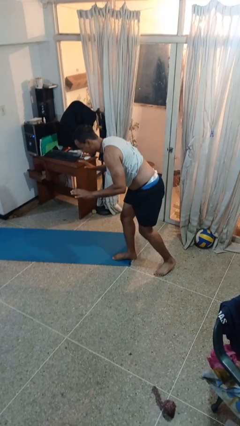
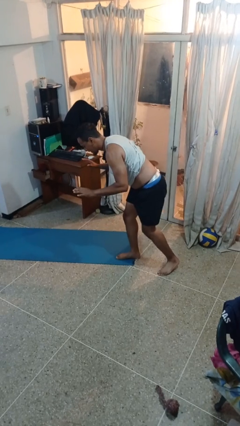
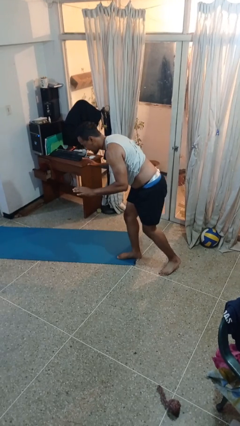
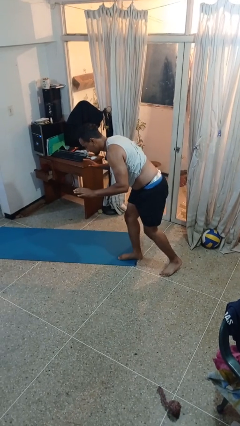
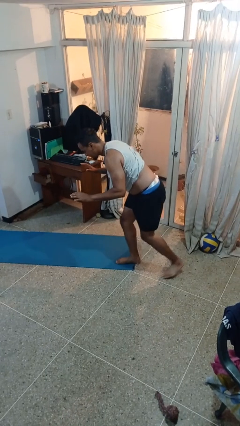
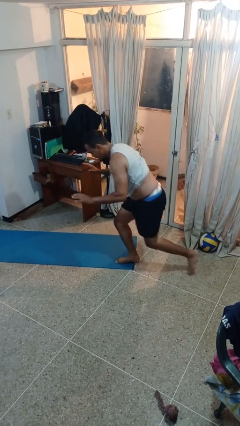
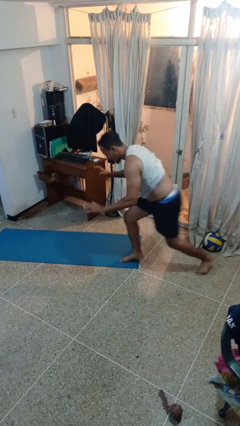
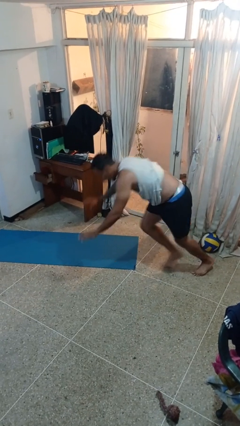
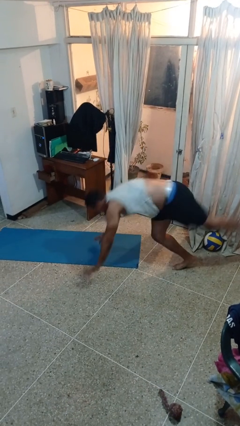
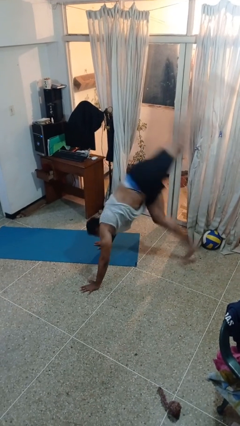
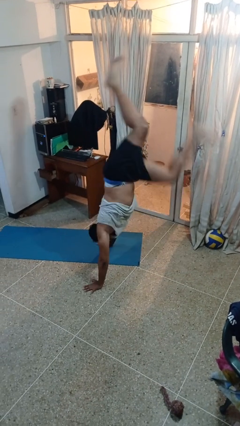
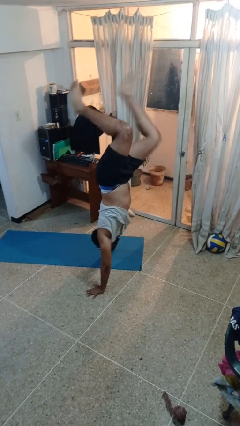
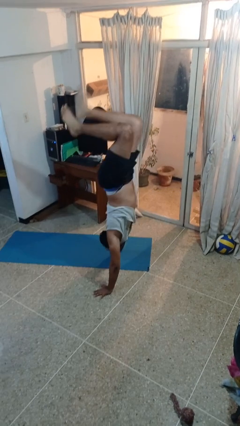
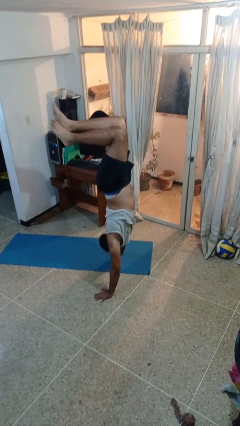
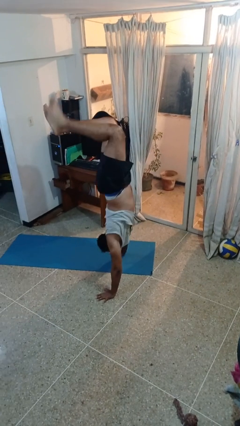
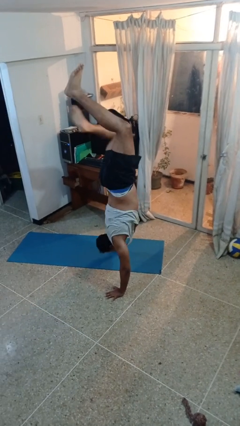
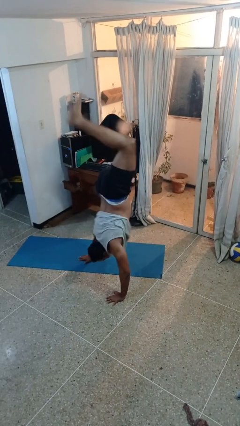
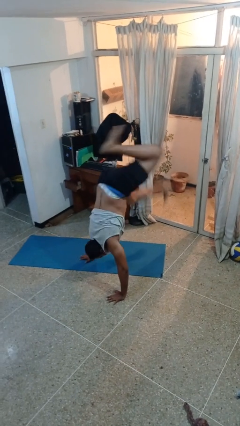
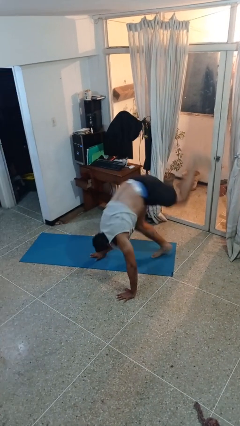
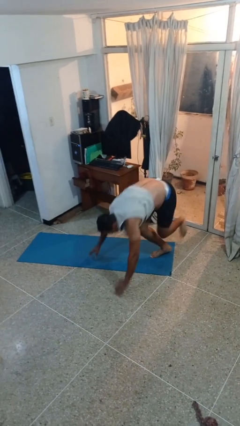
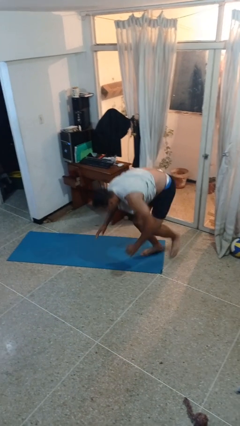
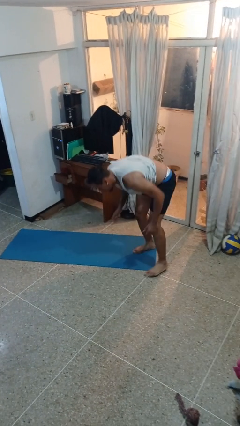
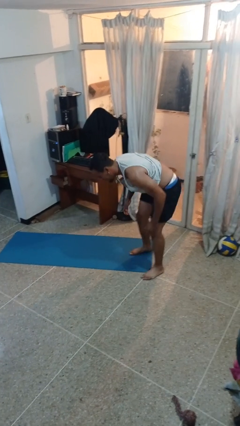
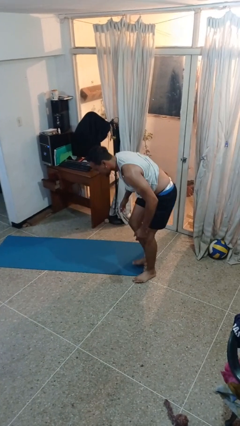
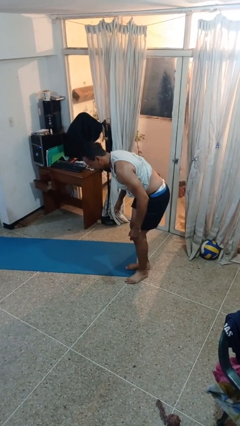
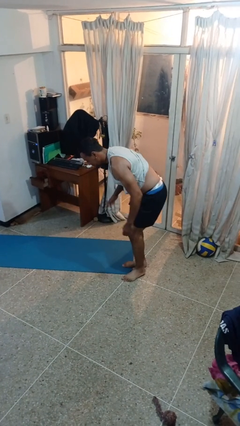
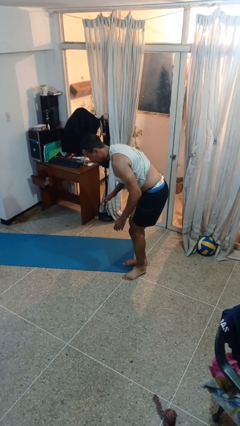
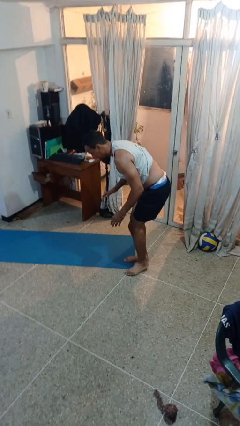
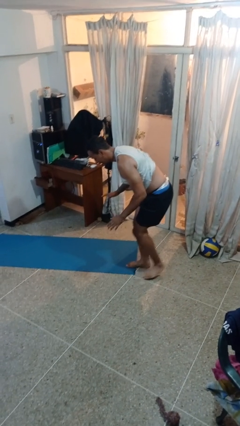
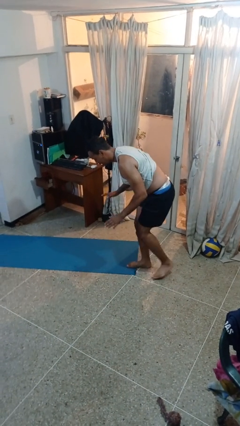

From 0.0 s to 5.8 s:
person handstand

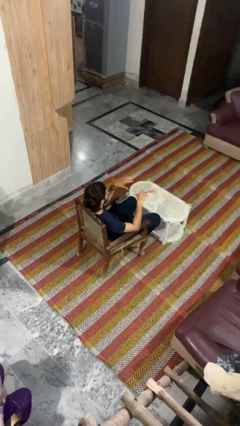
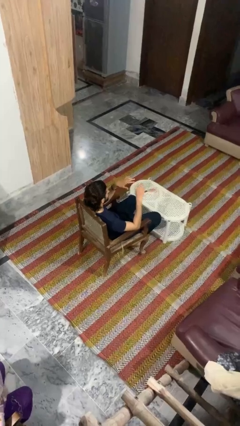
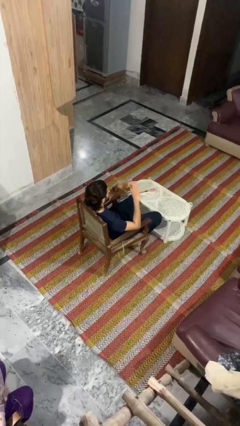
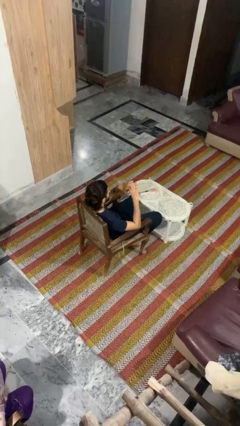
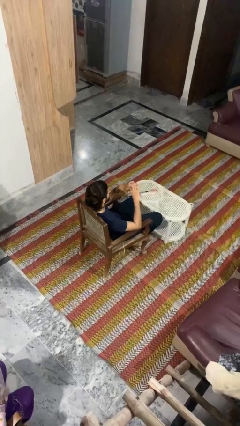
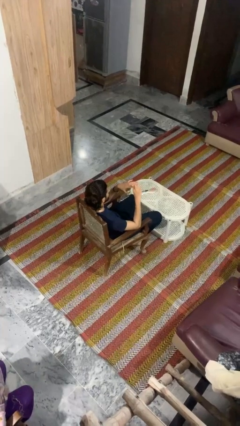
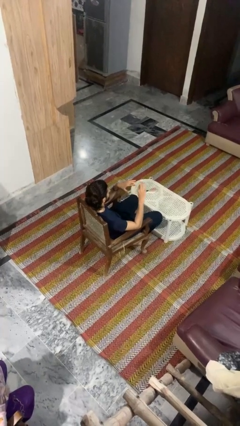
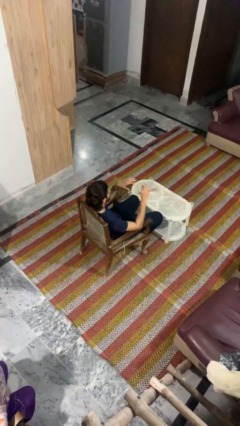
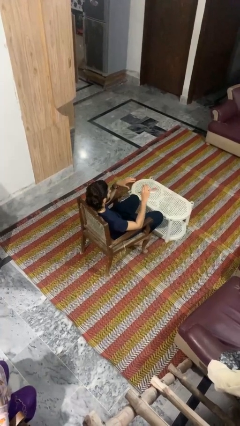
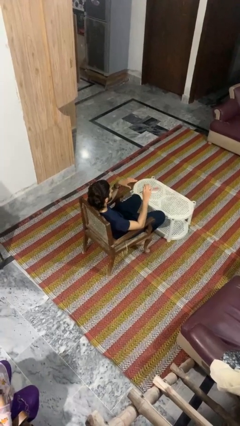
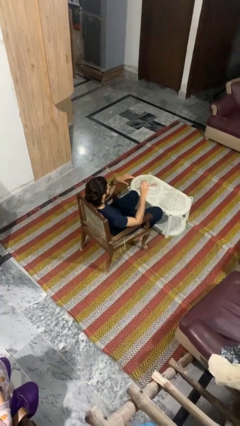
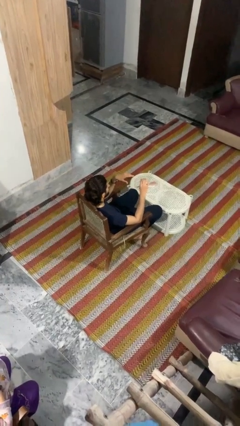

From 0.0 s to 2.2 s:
person takes off ring

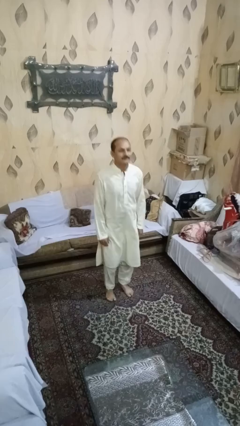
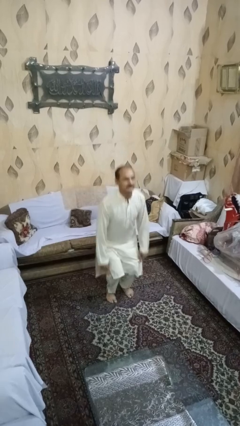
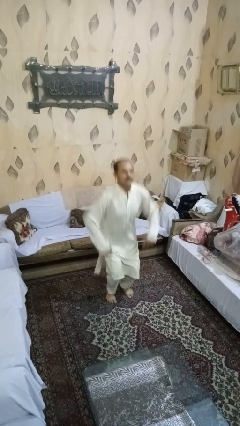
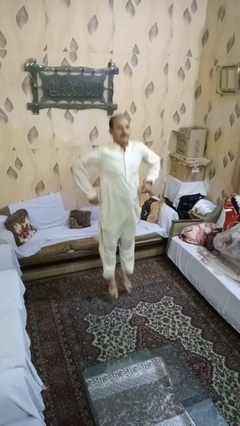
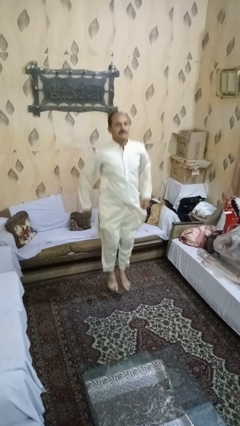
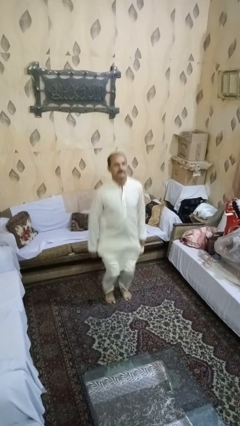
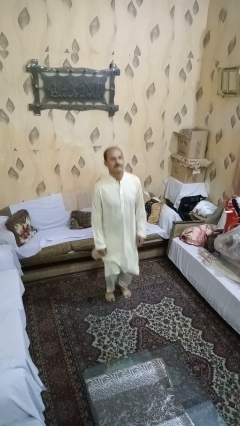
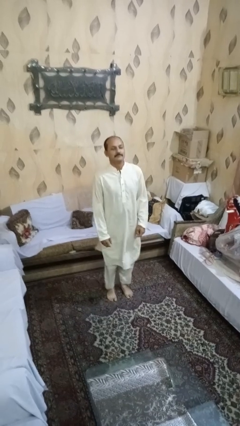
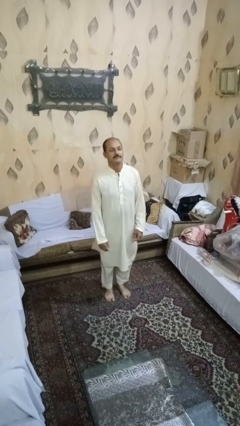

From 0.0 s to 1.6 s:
person jumps

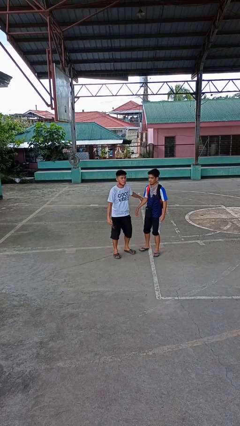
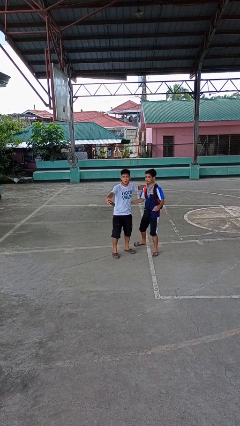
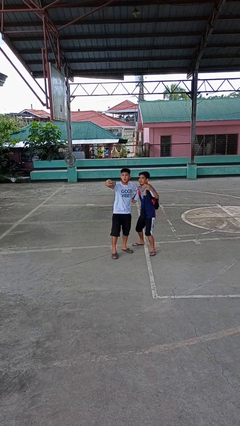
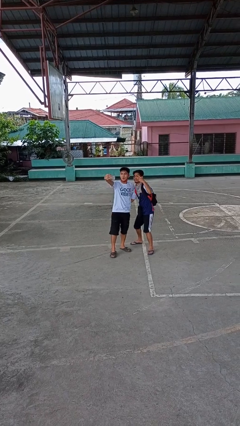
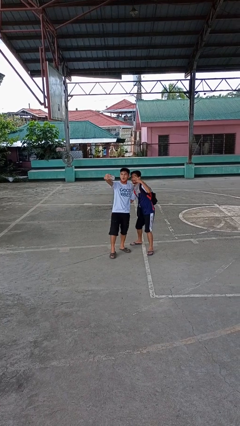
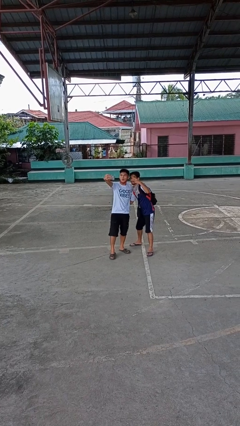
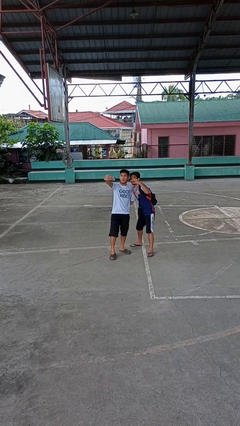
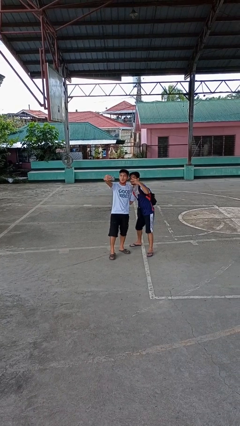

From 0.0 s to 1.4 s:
person takes selfie with person

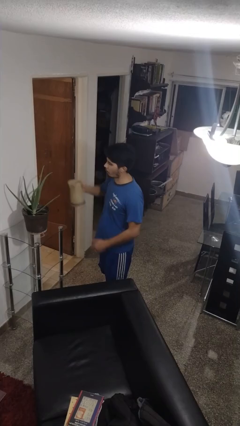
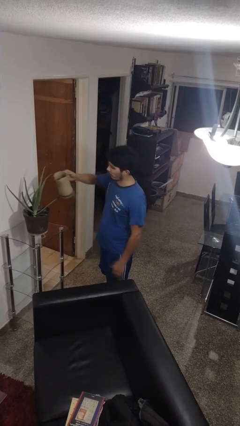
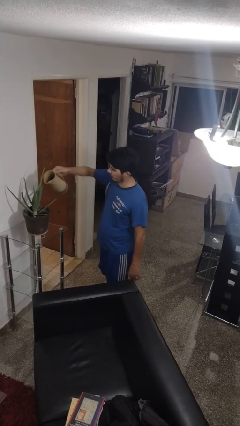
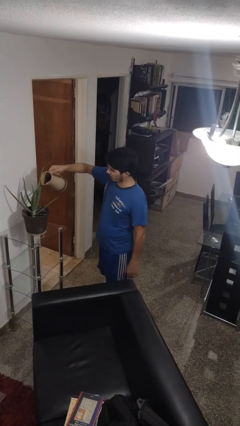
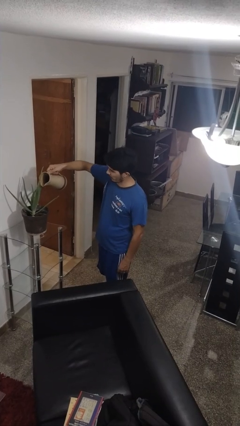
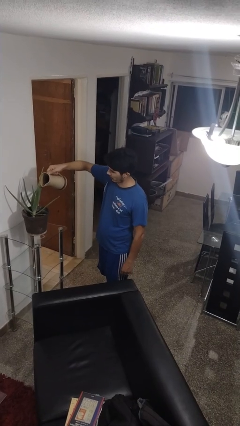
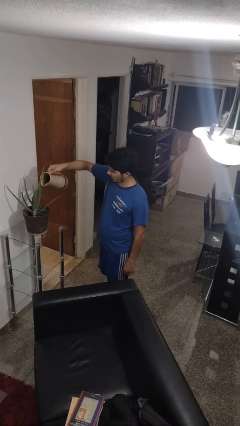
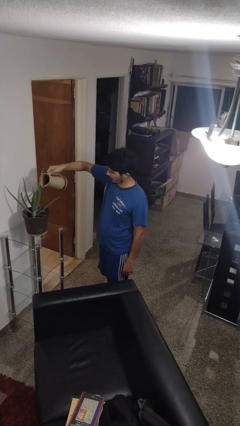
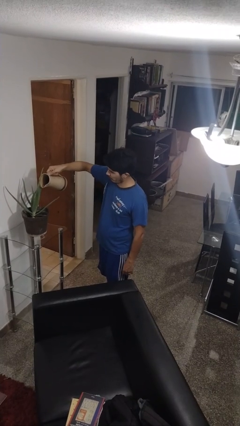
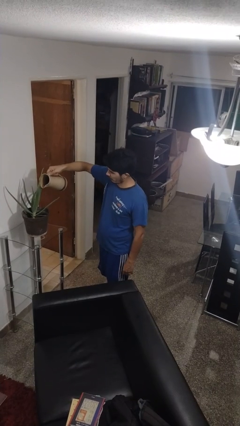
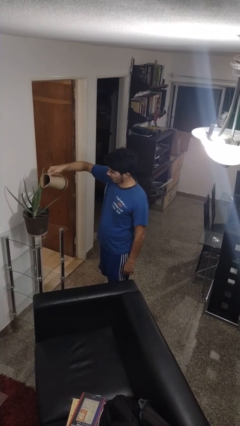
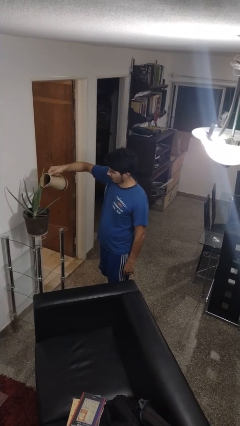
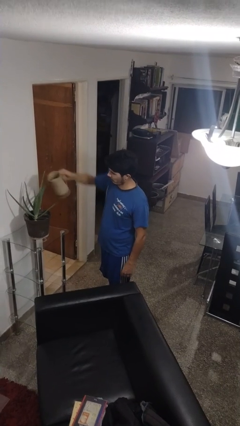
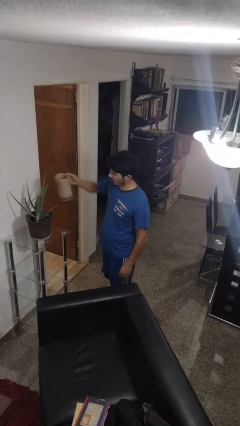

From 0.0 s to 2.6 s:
person waters houseplant

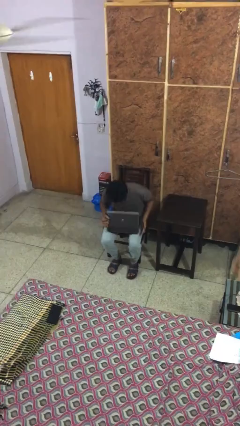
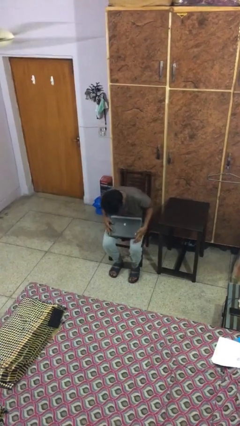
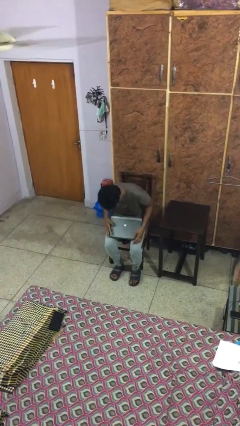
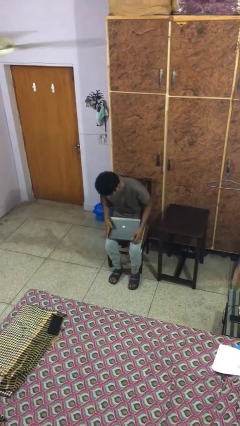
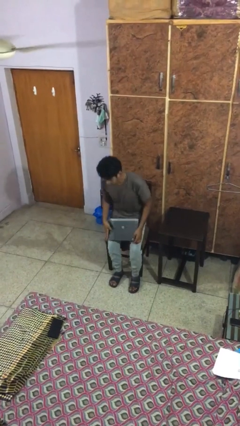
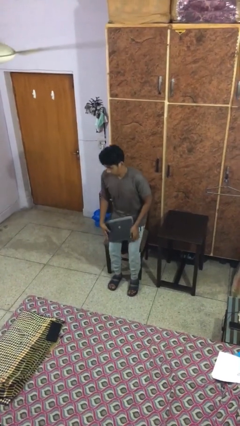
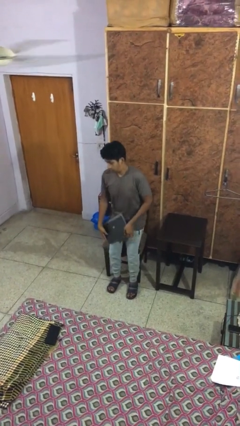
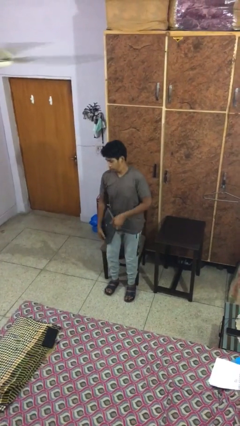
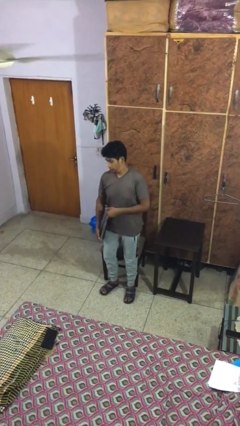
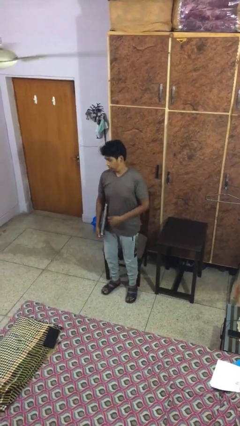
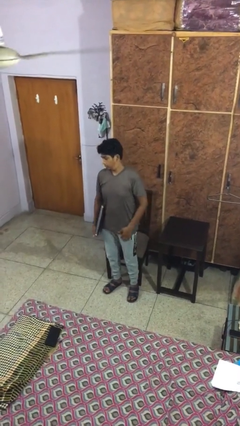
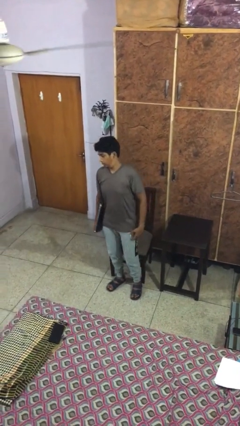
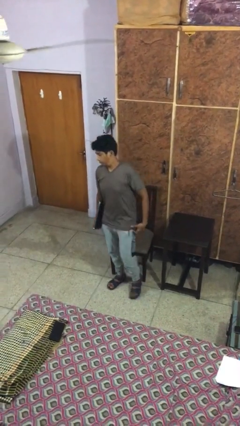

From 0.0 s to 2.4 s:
person stands up

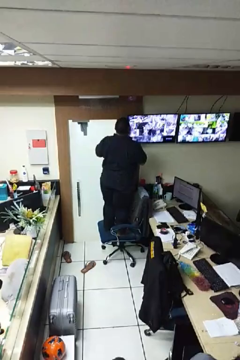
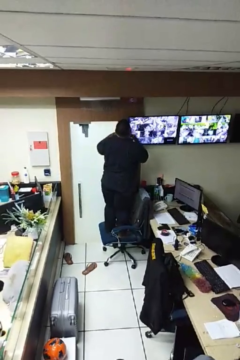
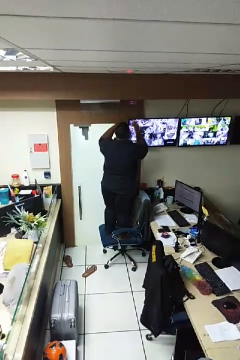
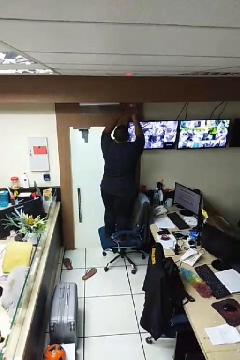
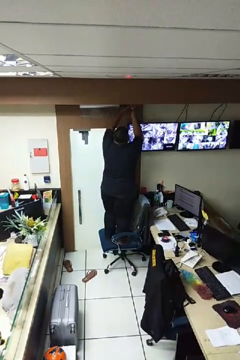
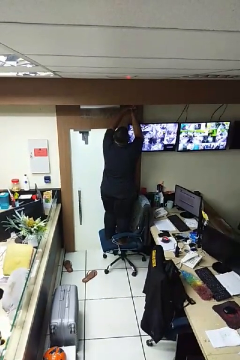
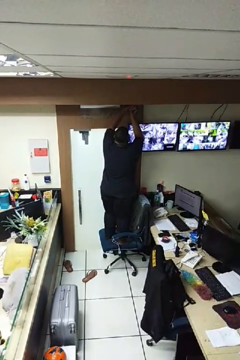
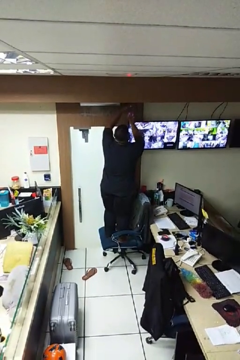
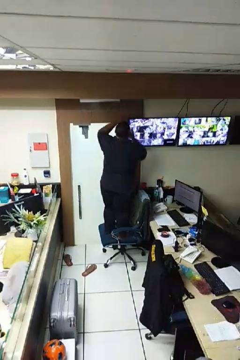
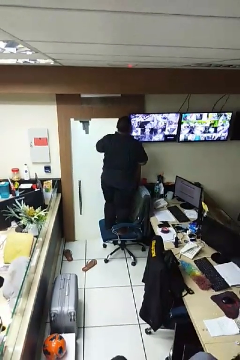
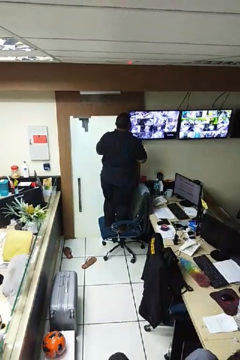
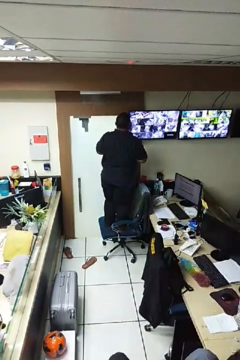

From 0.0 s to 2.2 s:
person takes down smoke detector
